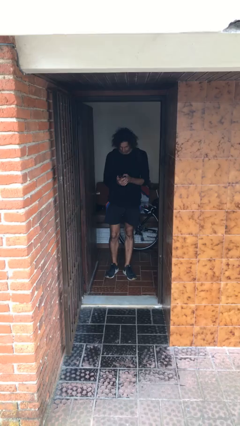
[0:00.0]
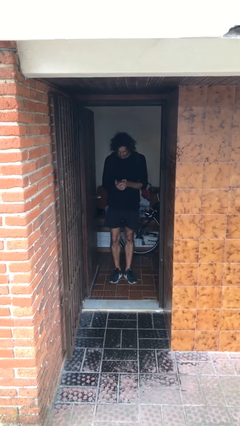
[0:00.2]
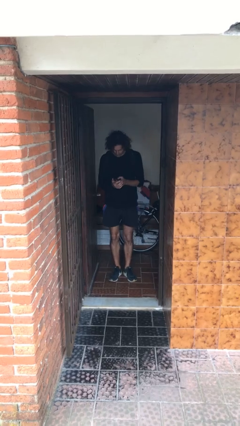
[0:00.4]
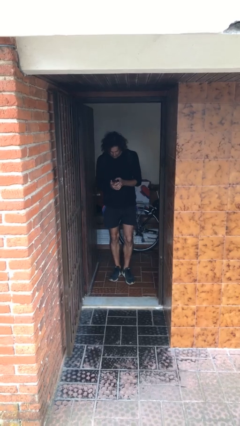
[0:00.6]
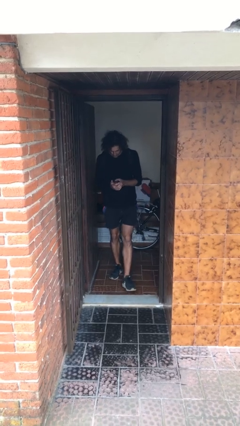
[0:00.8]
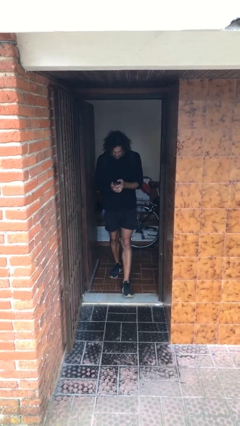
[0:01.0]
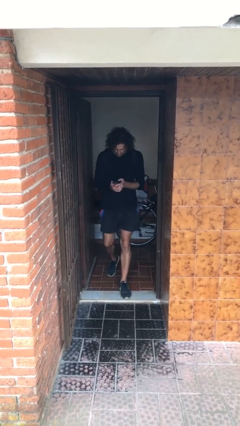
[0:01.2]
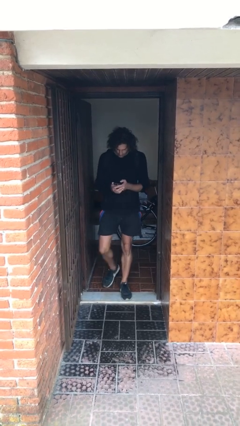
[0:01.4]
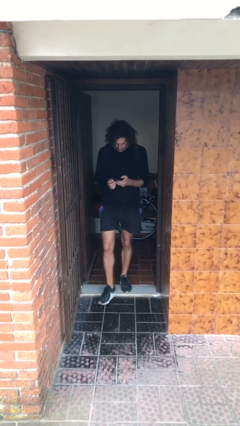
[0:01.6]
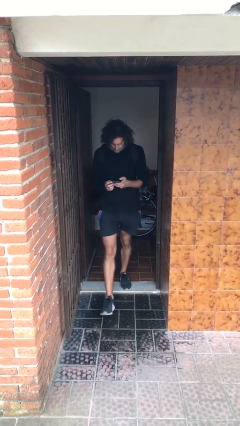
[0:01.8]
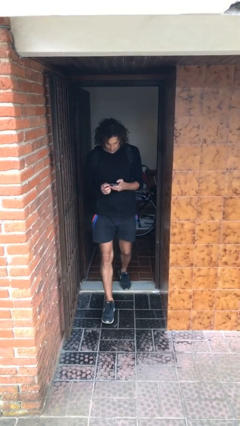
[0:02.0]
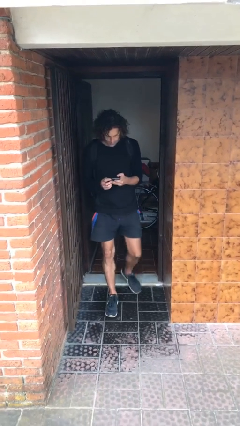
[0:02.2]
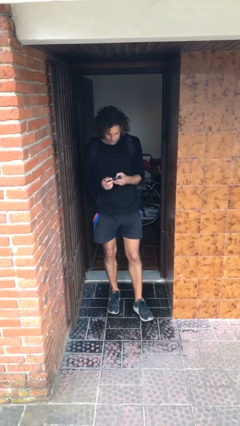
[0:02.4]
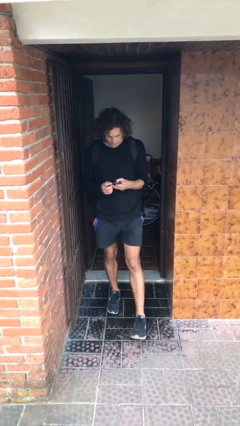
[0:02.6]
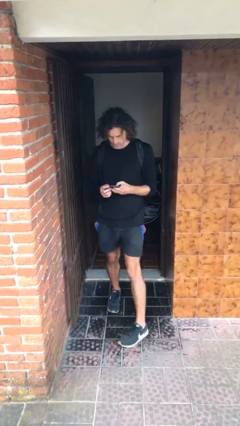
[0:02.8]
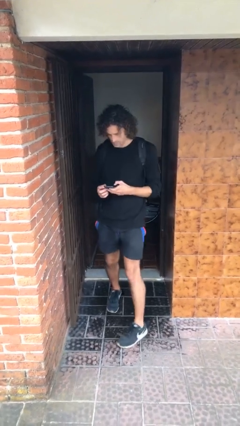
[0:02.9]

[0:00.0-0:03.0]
person enters scene through structure

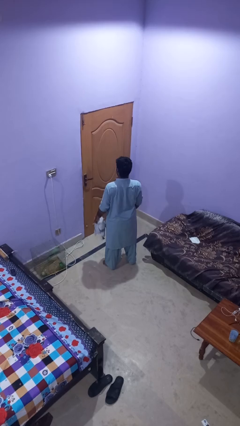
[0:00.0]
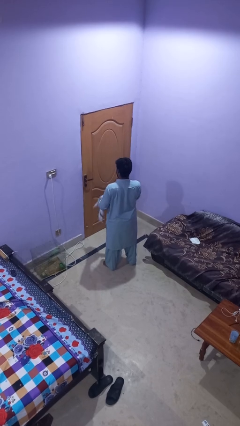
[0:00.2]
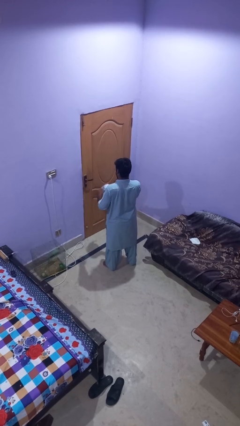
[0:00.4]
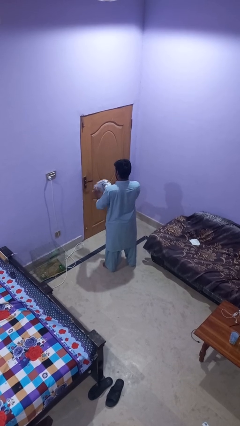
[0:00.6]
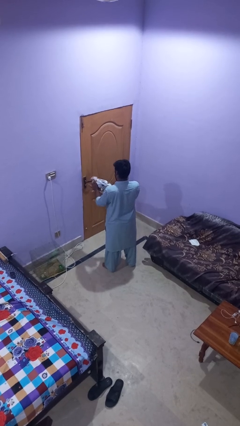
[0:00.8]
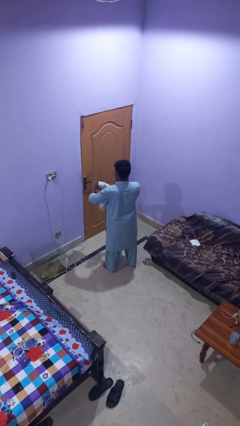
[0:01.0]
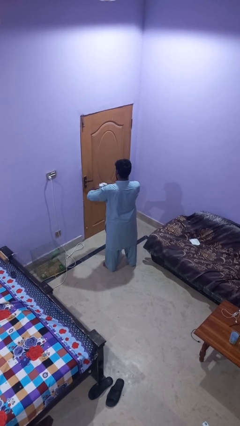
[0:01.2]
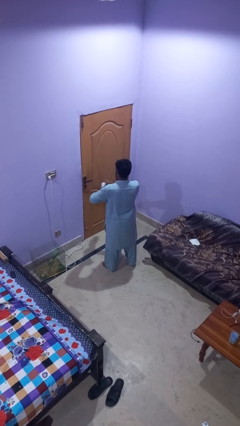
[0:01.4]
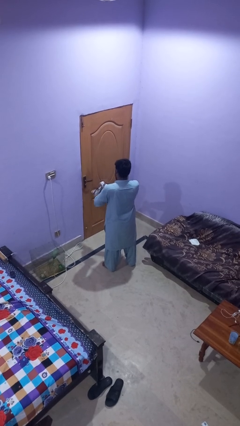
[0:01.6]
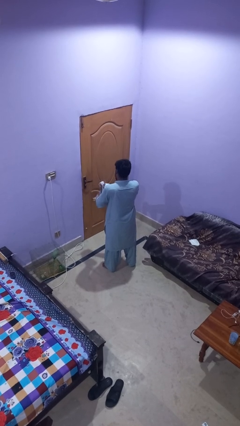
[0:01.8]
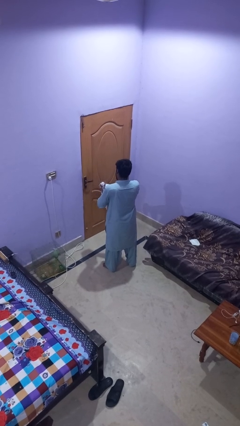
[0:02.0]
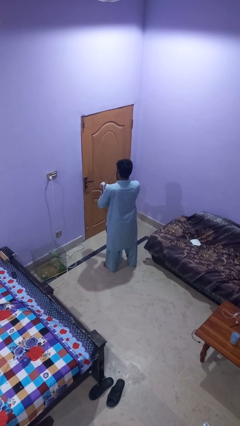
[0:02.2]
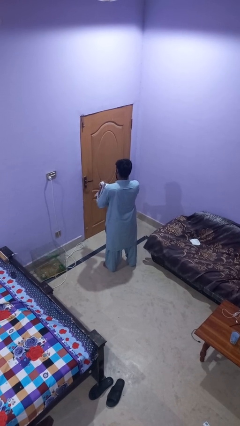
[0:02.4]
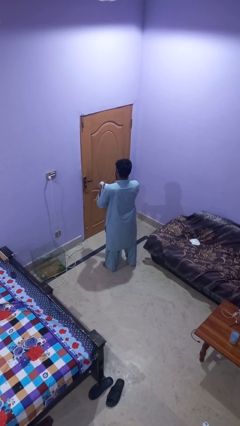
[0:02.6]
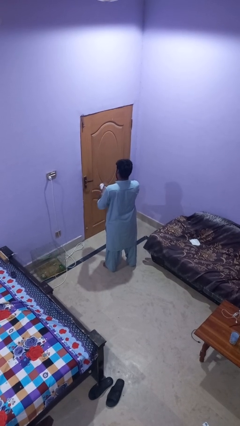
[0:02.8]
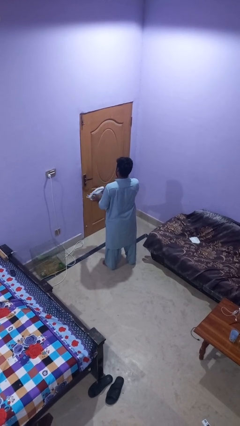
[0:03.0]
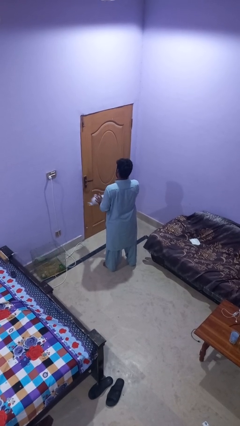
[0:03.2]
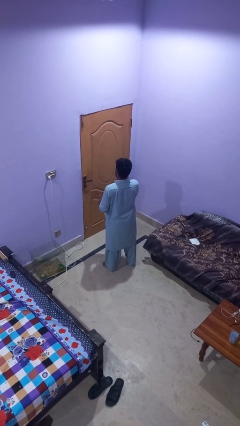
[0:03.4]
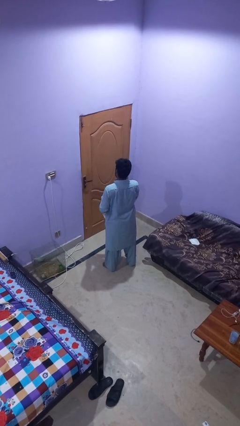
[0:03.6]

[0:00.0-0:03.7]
person squeezes object

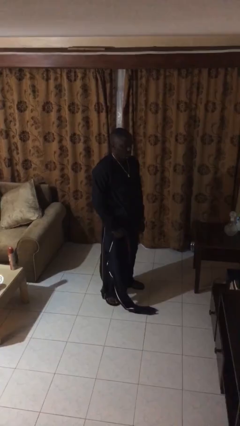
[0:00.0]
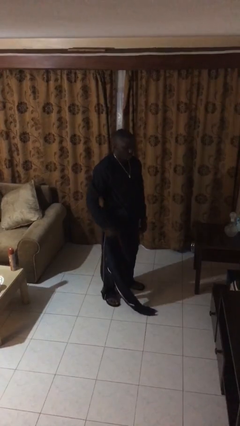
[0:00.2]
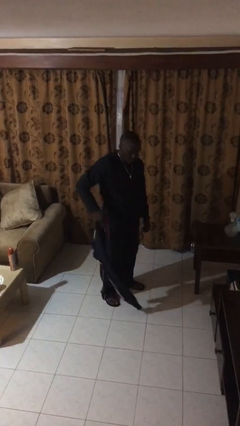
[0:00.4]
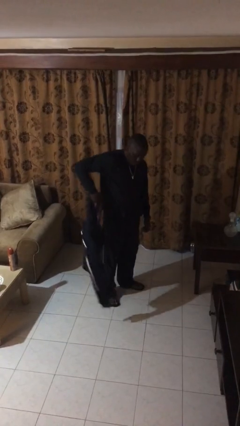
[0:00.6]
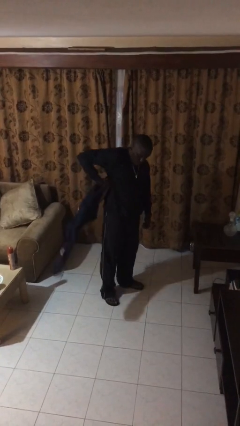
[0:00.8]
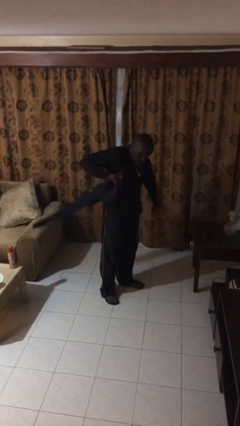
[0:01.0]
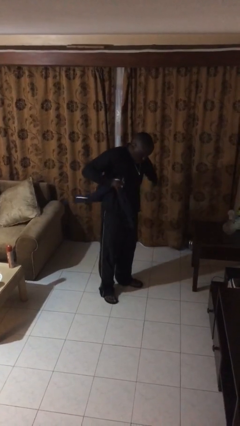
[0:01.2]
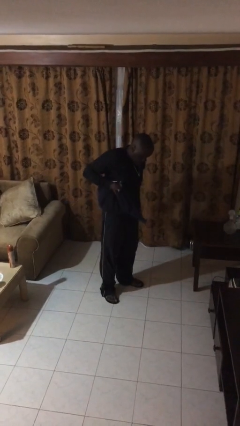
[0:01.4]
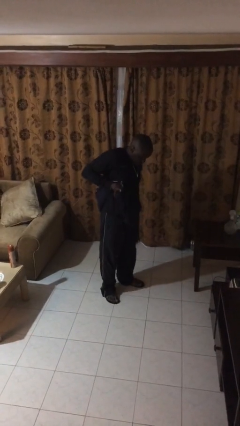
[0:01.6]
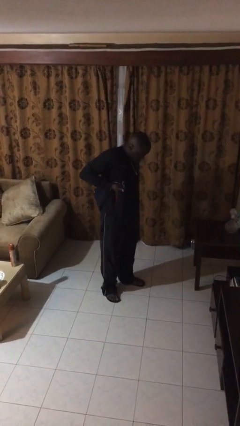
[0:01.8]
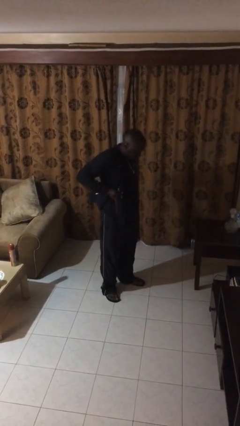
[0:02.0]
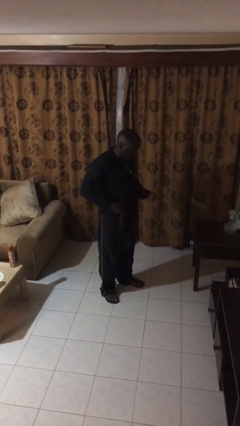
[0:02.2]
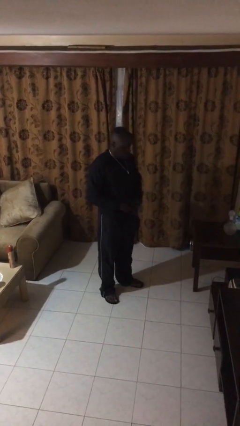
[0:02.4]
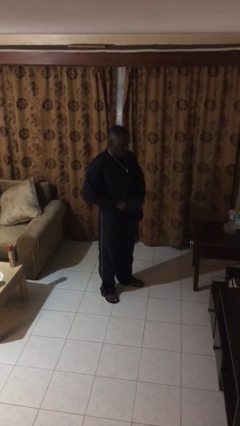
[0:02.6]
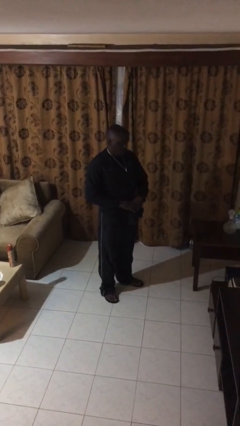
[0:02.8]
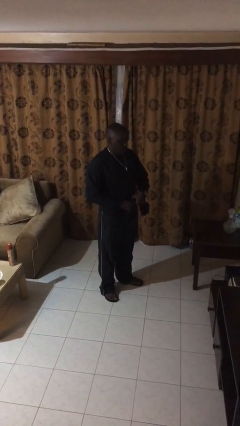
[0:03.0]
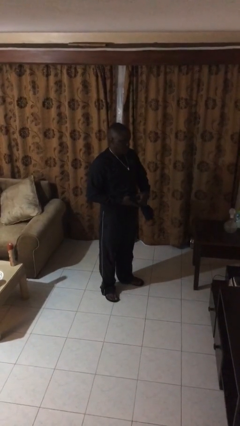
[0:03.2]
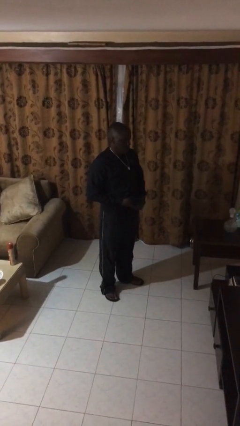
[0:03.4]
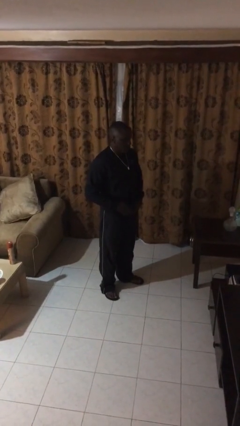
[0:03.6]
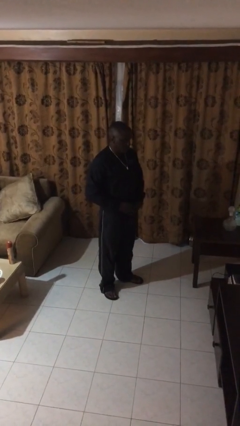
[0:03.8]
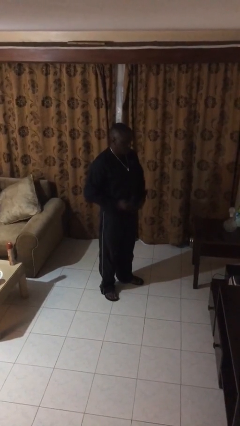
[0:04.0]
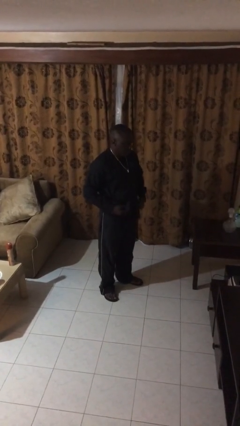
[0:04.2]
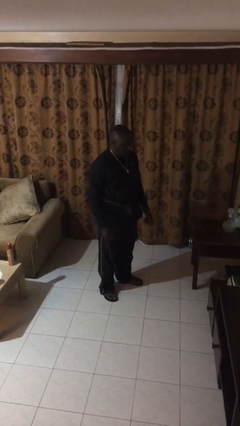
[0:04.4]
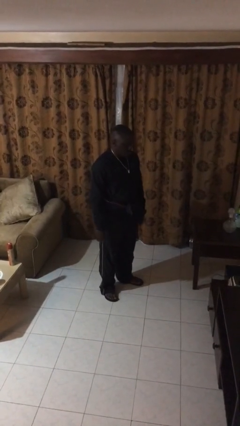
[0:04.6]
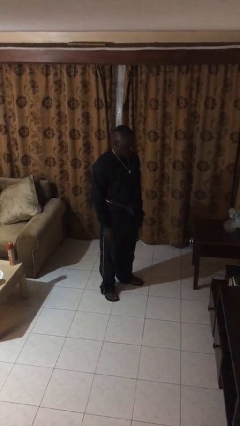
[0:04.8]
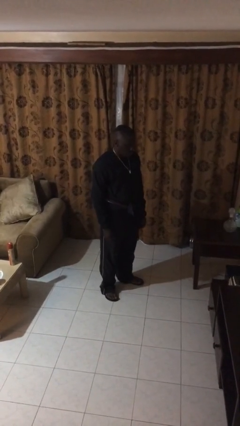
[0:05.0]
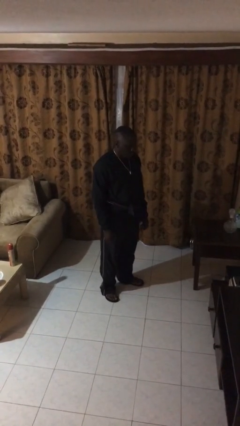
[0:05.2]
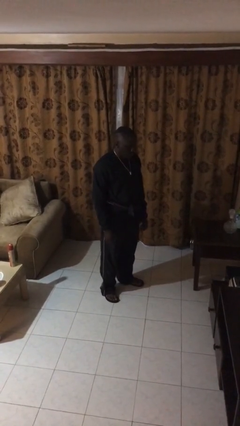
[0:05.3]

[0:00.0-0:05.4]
person ties jacket around waist

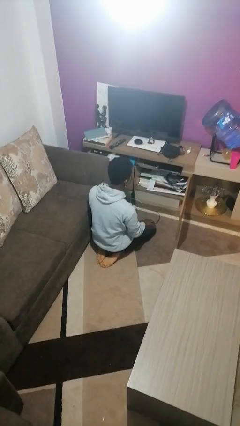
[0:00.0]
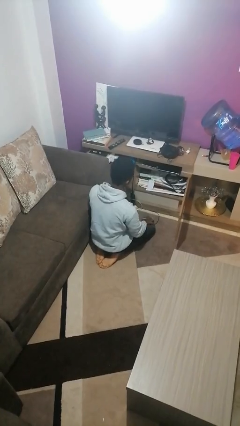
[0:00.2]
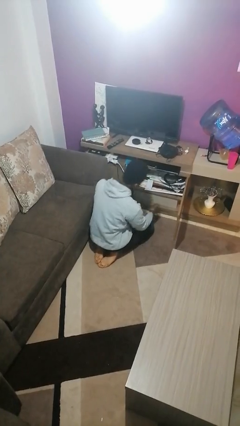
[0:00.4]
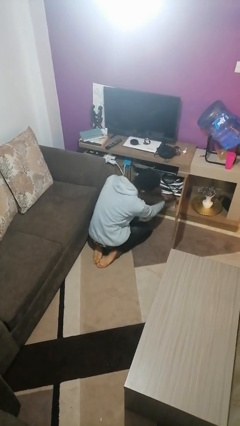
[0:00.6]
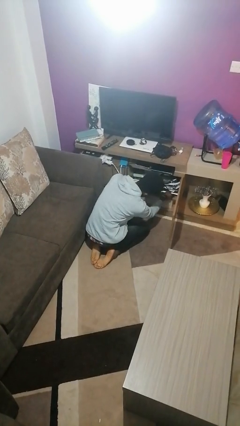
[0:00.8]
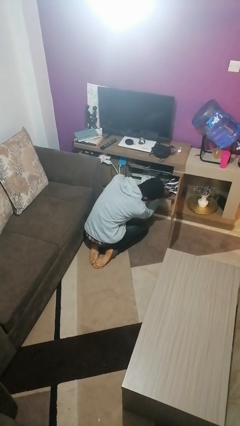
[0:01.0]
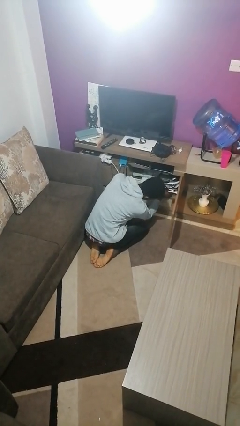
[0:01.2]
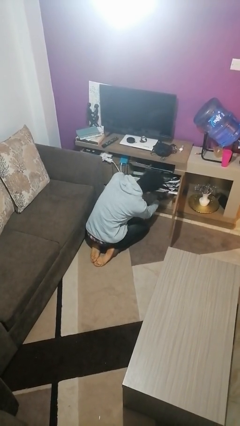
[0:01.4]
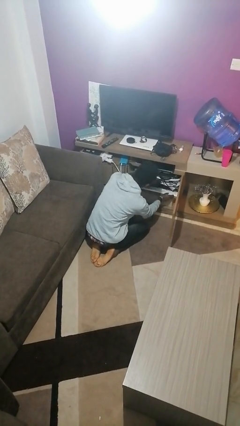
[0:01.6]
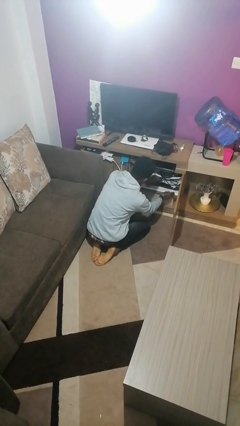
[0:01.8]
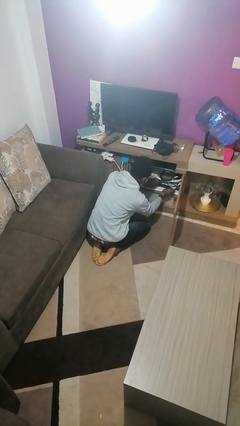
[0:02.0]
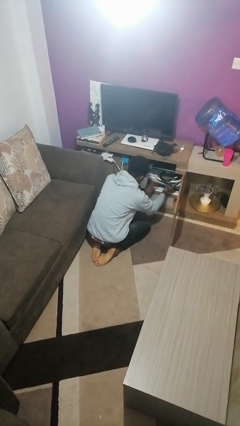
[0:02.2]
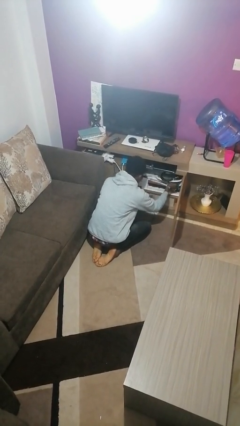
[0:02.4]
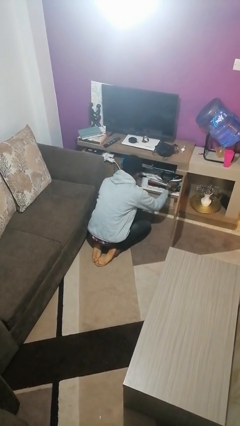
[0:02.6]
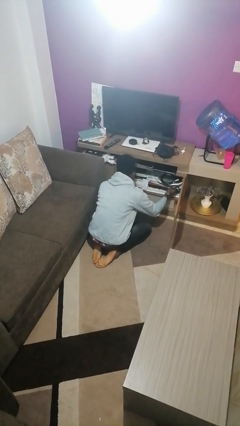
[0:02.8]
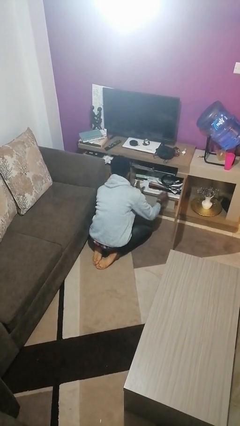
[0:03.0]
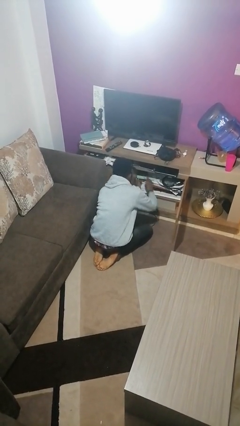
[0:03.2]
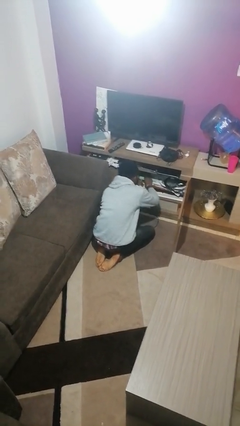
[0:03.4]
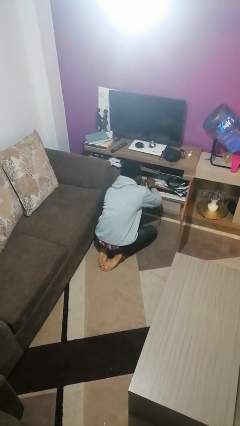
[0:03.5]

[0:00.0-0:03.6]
person searches in cabinet

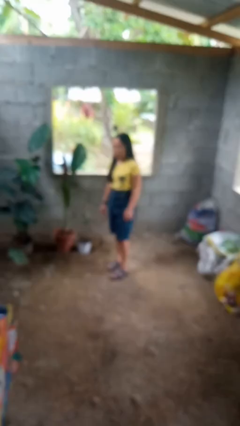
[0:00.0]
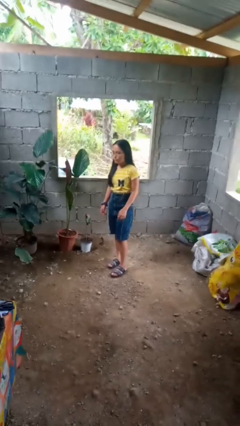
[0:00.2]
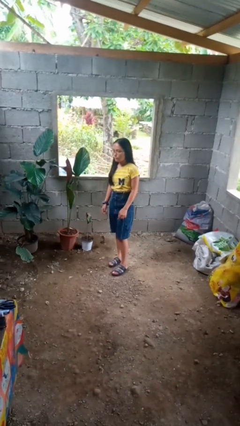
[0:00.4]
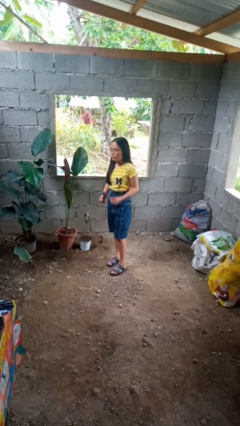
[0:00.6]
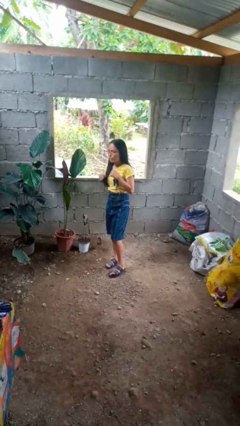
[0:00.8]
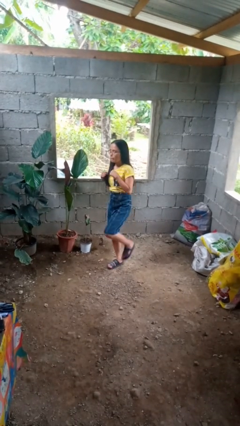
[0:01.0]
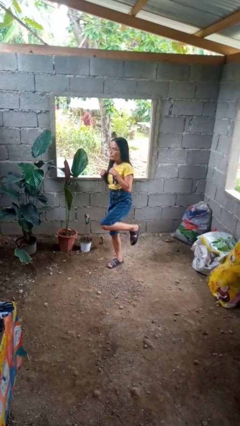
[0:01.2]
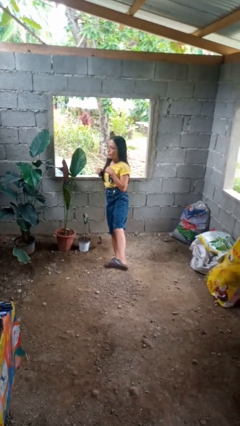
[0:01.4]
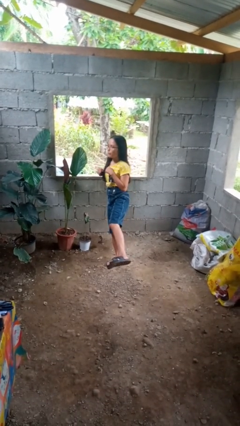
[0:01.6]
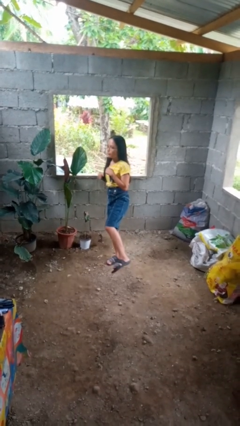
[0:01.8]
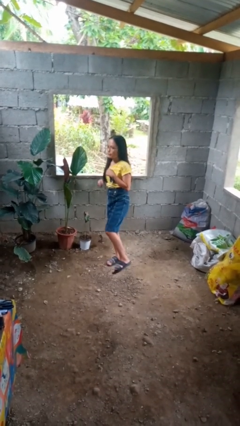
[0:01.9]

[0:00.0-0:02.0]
person karate kicks

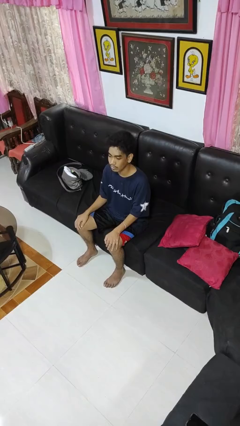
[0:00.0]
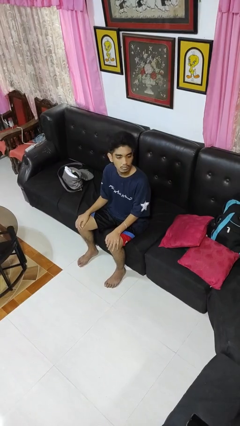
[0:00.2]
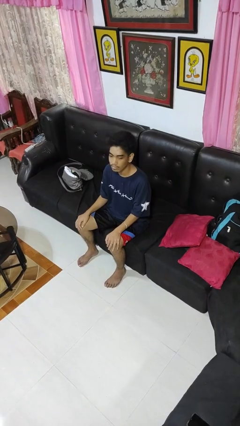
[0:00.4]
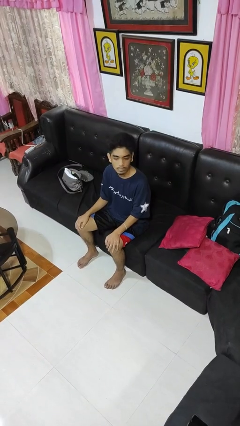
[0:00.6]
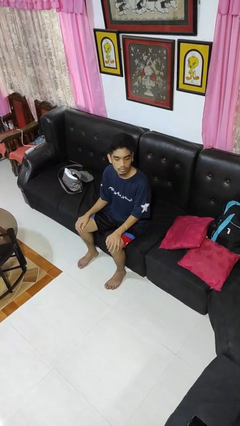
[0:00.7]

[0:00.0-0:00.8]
person shakes head
